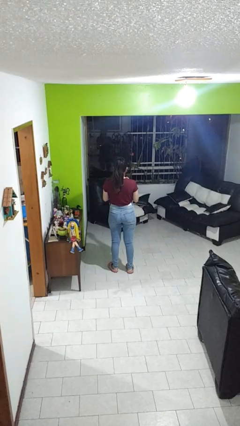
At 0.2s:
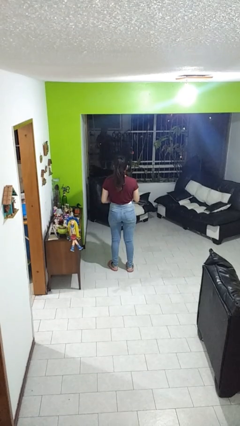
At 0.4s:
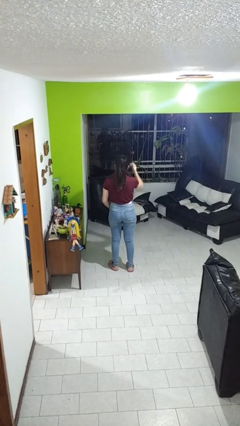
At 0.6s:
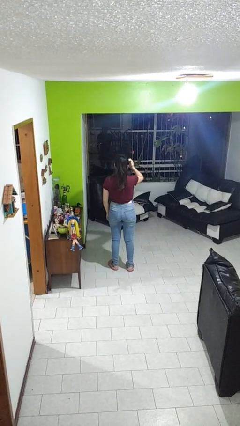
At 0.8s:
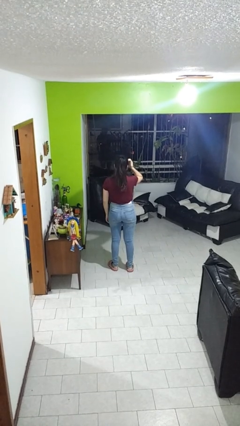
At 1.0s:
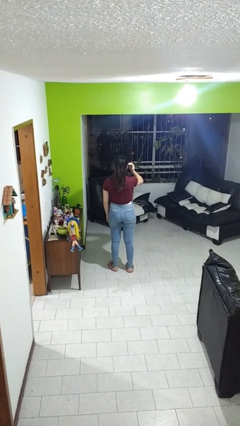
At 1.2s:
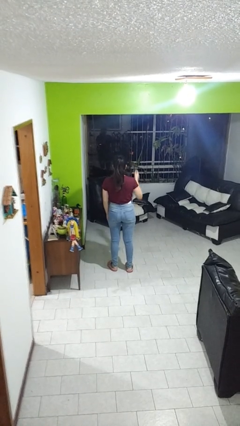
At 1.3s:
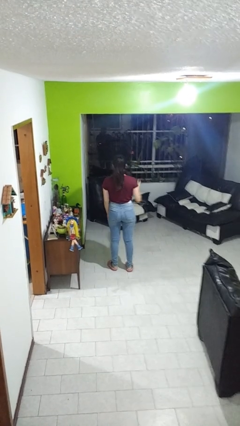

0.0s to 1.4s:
person scratches face

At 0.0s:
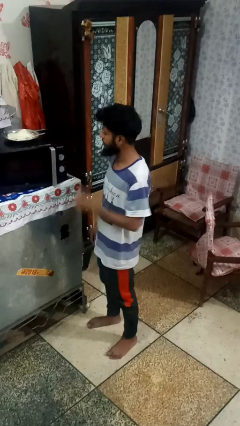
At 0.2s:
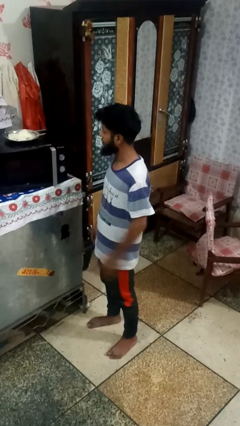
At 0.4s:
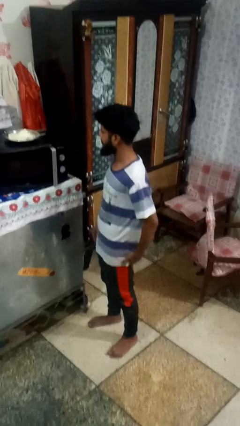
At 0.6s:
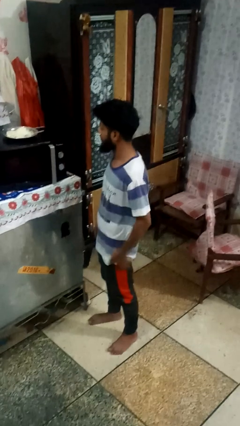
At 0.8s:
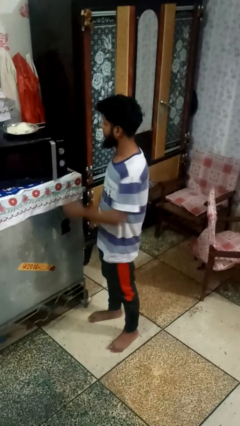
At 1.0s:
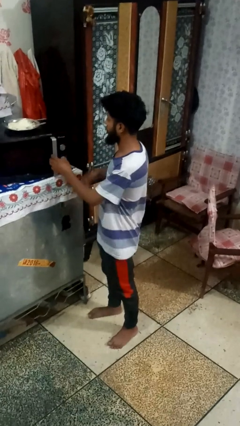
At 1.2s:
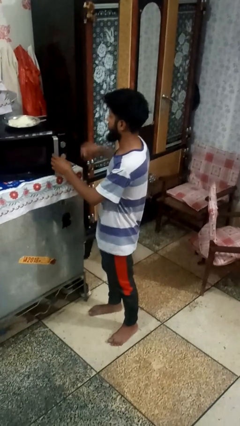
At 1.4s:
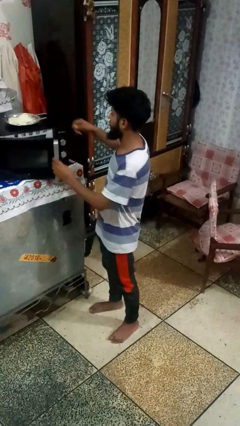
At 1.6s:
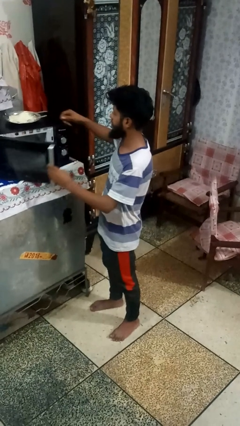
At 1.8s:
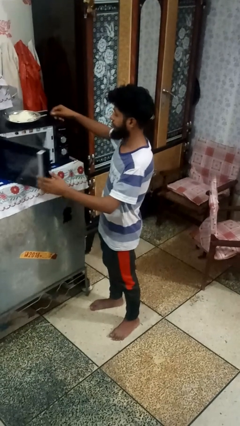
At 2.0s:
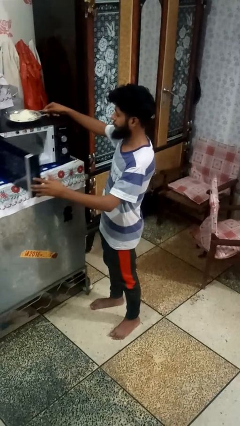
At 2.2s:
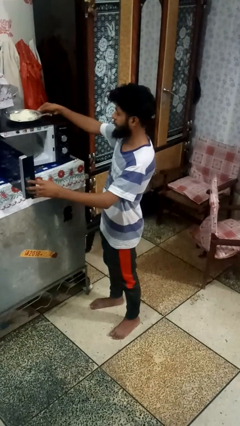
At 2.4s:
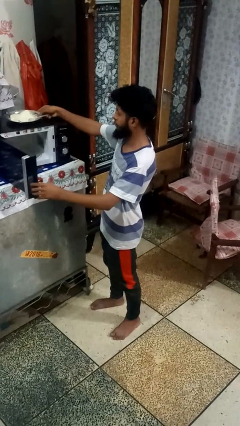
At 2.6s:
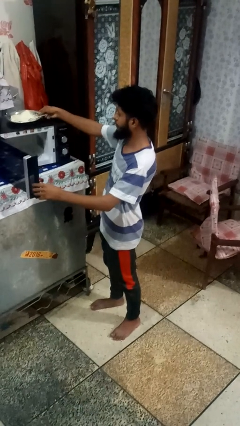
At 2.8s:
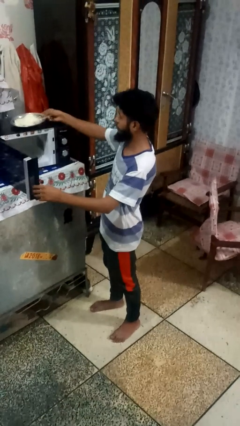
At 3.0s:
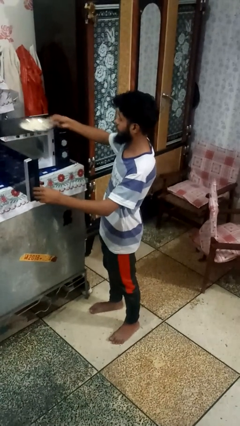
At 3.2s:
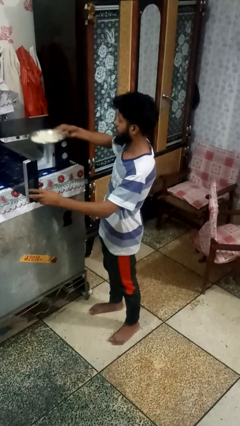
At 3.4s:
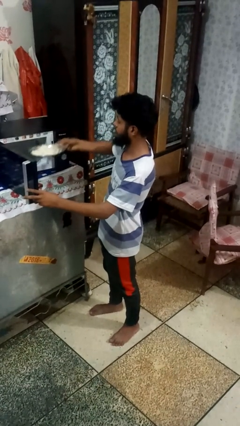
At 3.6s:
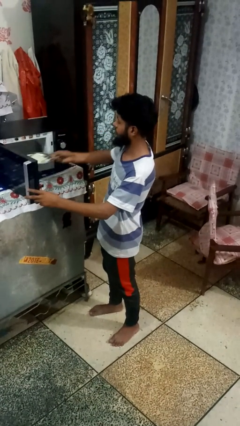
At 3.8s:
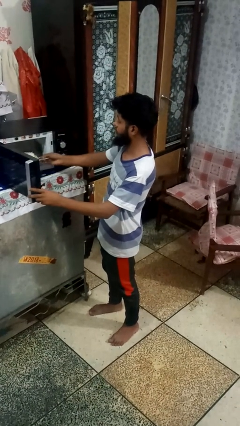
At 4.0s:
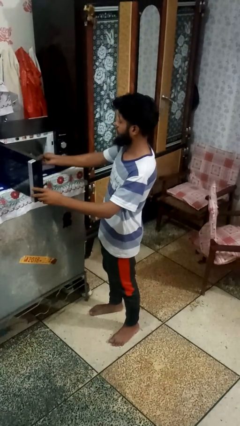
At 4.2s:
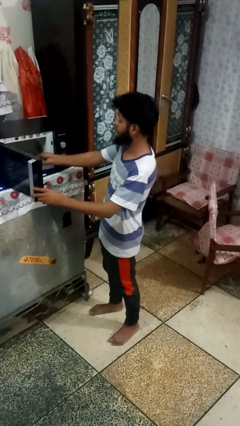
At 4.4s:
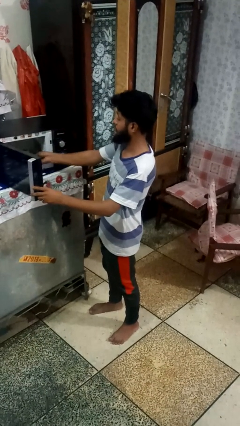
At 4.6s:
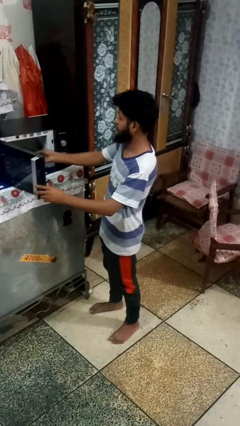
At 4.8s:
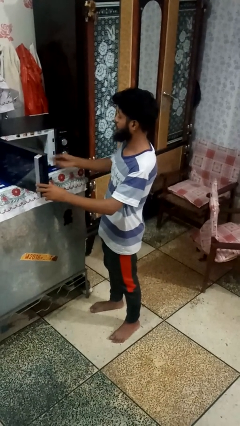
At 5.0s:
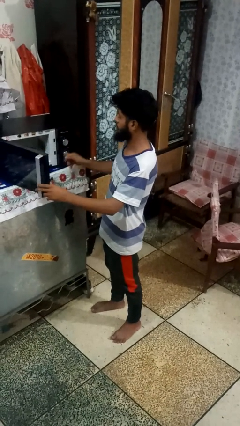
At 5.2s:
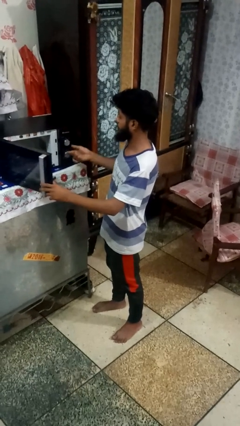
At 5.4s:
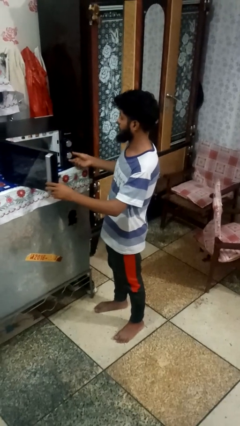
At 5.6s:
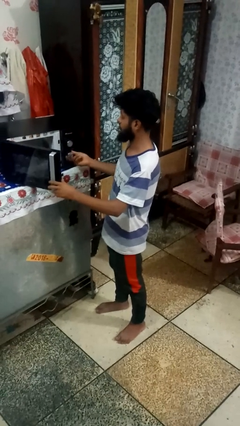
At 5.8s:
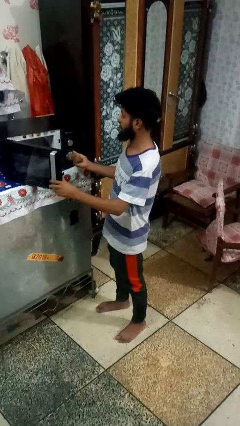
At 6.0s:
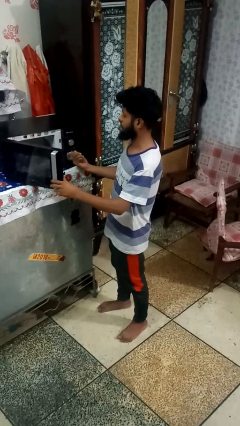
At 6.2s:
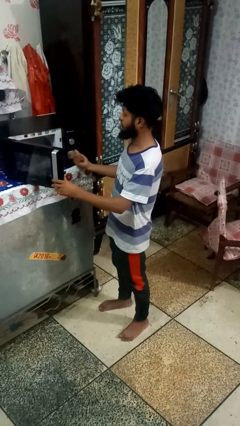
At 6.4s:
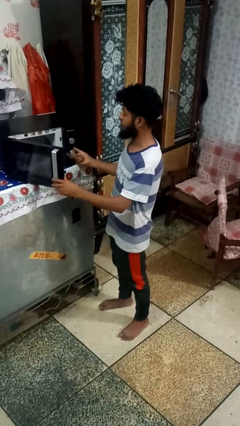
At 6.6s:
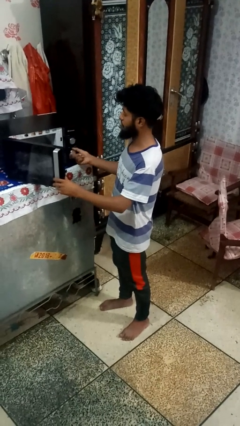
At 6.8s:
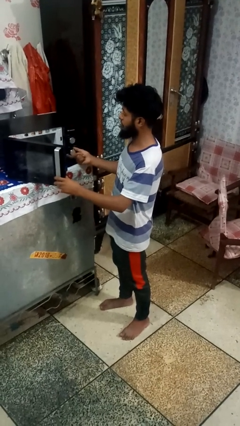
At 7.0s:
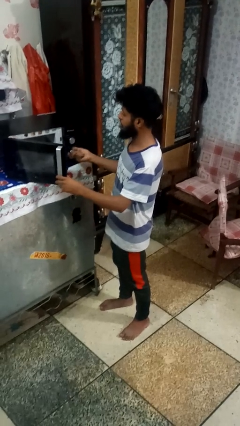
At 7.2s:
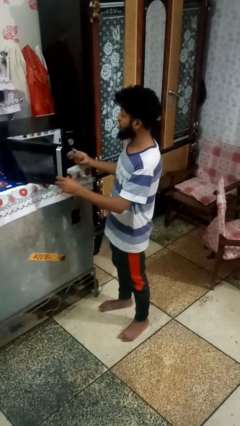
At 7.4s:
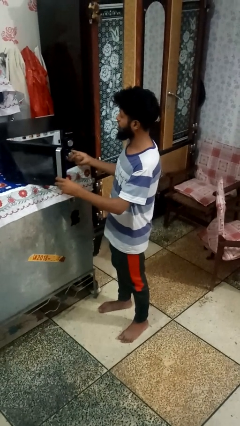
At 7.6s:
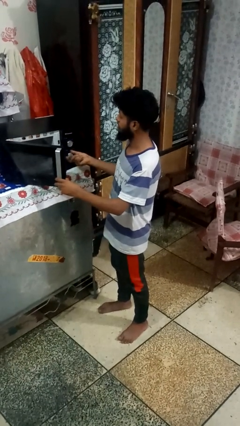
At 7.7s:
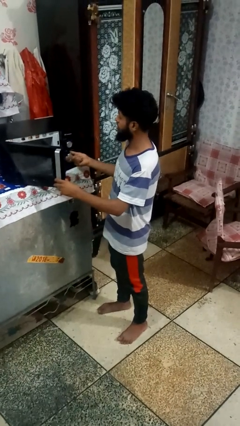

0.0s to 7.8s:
person opens oven door

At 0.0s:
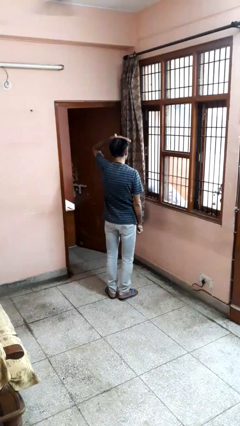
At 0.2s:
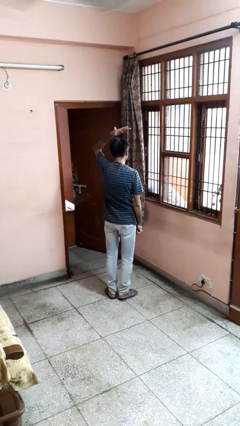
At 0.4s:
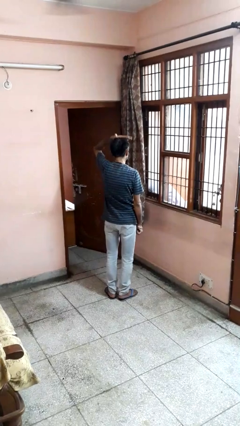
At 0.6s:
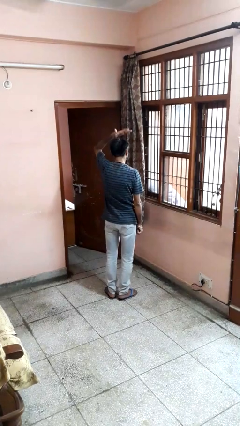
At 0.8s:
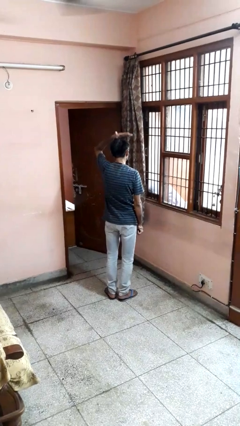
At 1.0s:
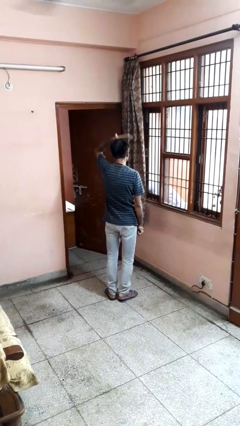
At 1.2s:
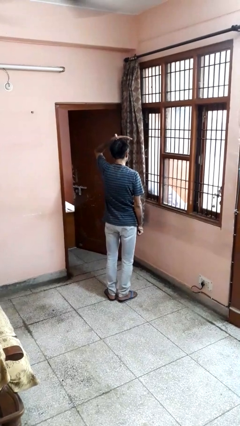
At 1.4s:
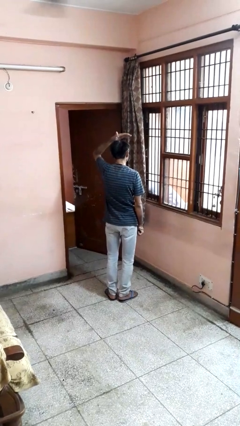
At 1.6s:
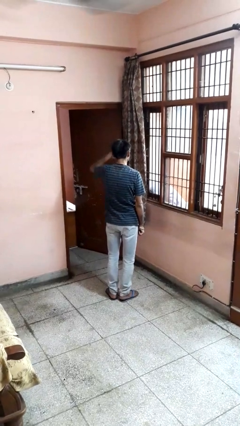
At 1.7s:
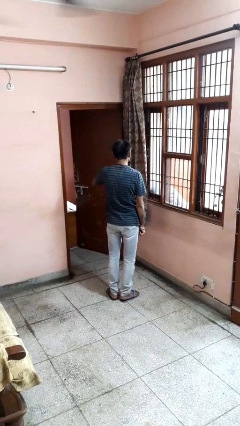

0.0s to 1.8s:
person pats head

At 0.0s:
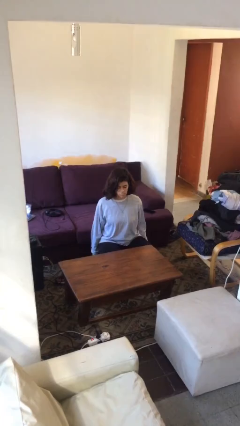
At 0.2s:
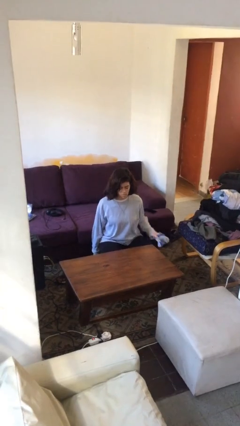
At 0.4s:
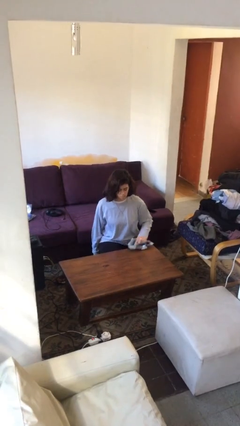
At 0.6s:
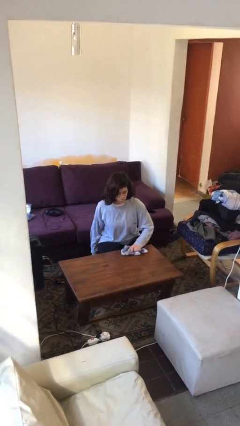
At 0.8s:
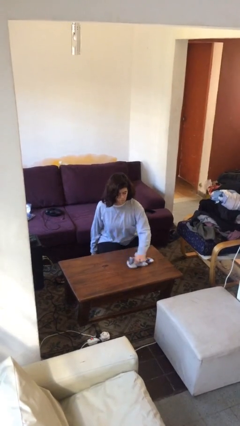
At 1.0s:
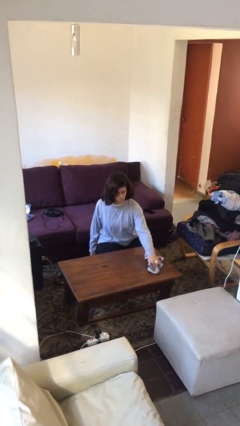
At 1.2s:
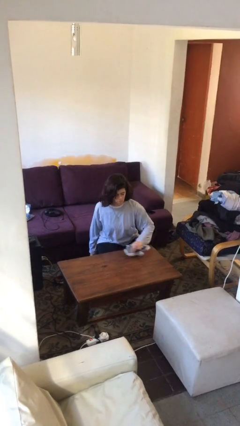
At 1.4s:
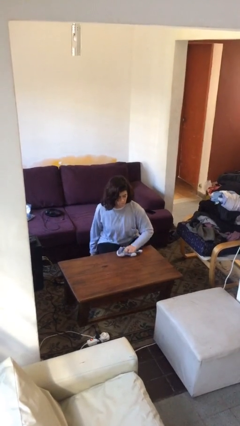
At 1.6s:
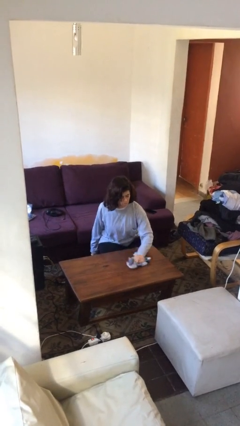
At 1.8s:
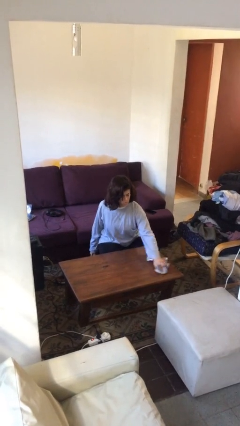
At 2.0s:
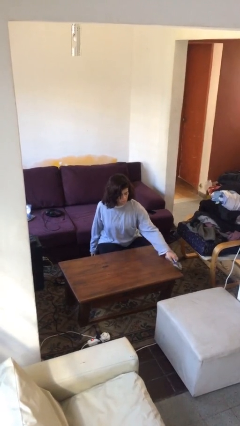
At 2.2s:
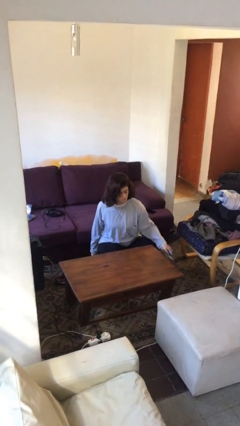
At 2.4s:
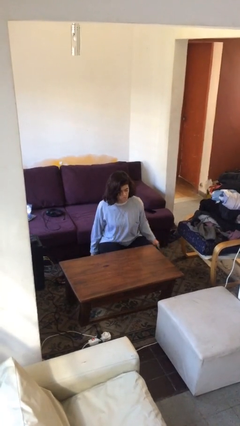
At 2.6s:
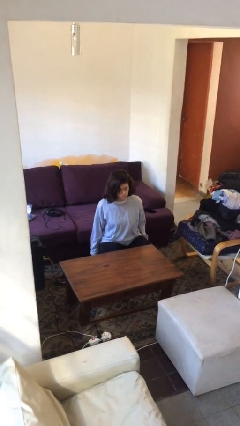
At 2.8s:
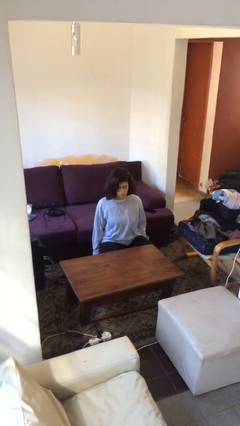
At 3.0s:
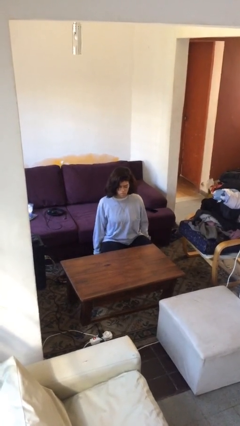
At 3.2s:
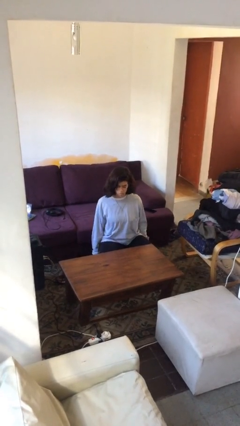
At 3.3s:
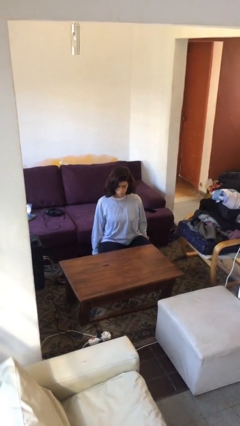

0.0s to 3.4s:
person cleans table with rag

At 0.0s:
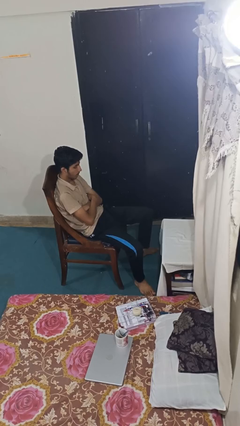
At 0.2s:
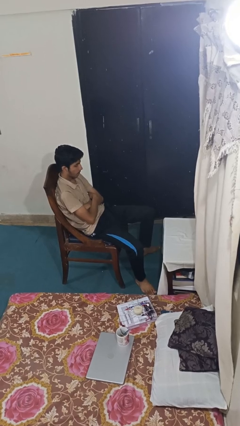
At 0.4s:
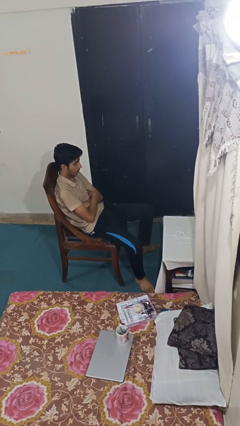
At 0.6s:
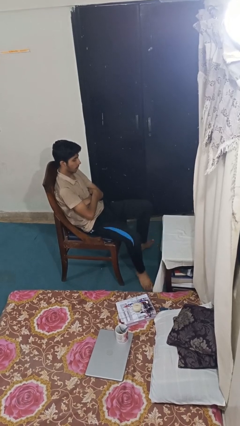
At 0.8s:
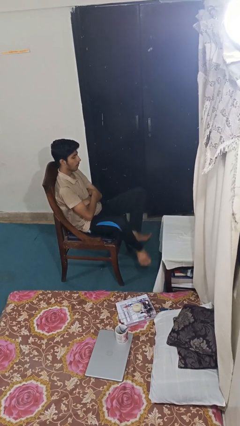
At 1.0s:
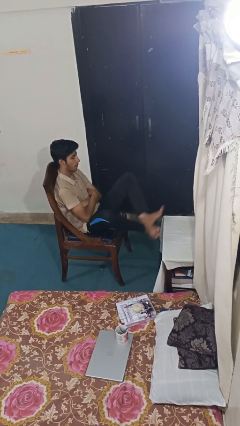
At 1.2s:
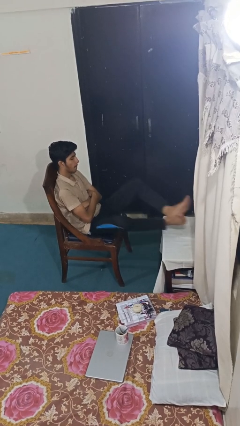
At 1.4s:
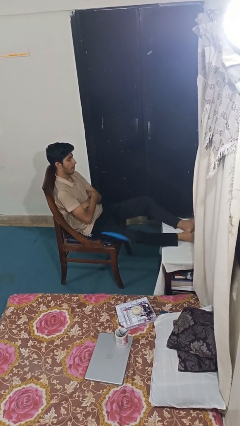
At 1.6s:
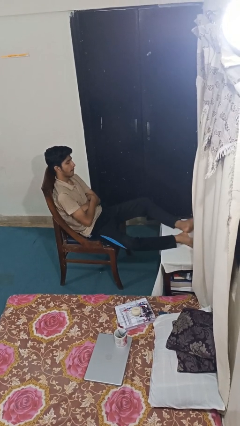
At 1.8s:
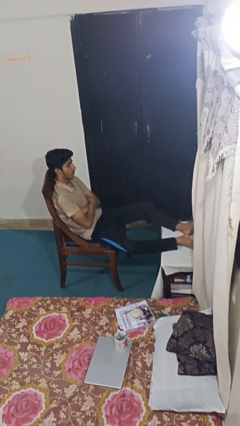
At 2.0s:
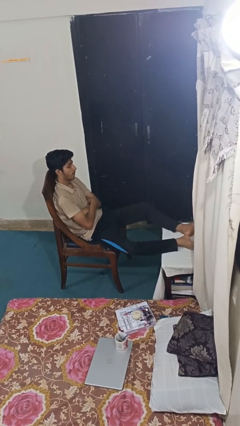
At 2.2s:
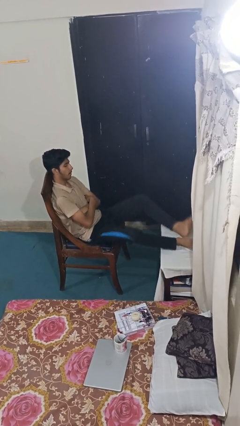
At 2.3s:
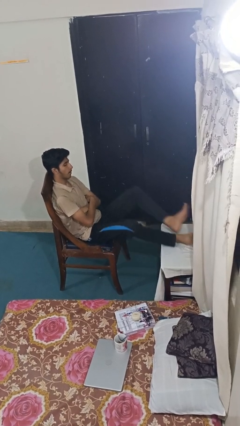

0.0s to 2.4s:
person puts feet up

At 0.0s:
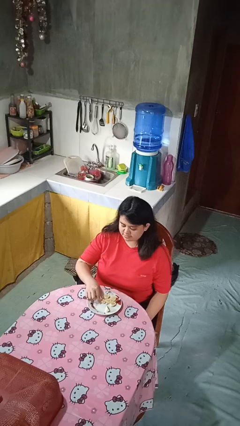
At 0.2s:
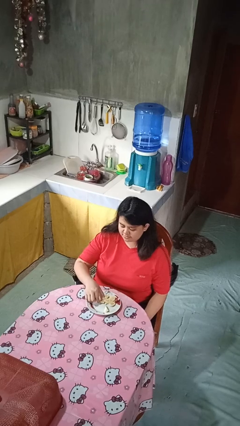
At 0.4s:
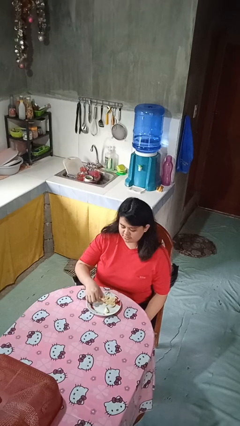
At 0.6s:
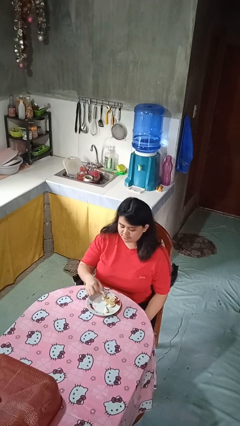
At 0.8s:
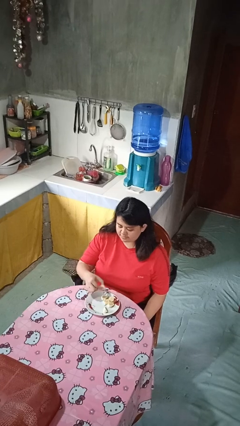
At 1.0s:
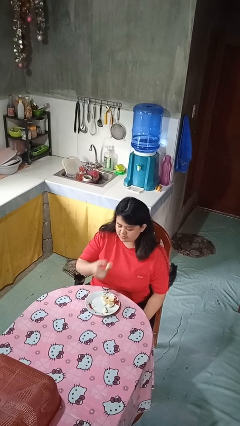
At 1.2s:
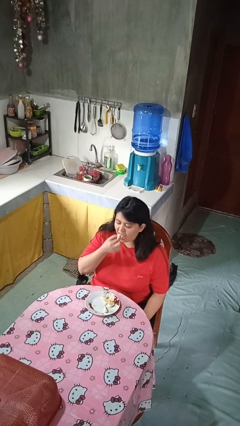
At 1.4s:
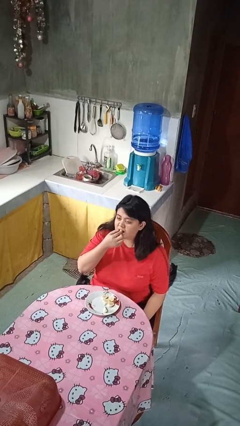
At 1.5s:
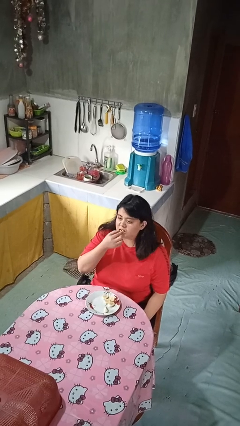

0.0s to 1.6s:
person eats with hands
